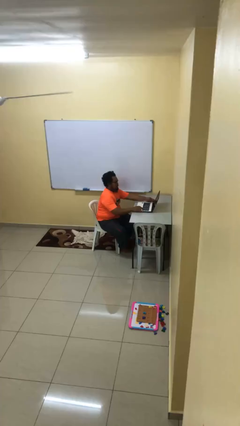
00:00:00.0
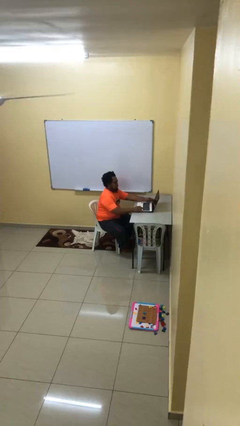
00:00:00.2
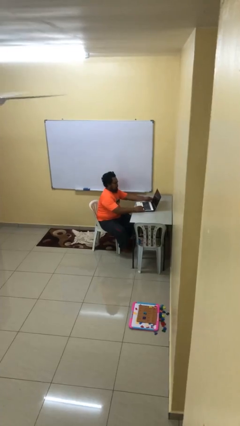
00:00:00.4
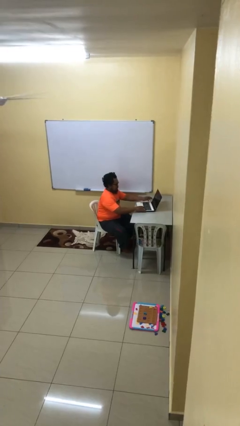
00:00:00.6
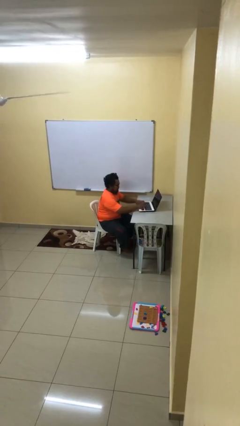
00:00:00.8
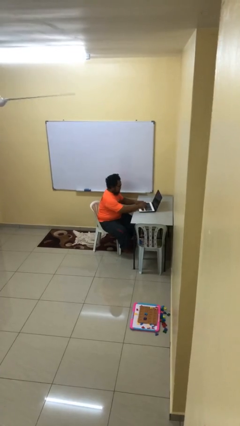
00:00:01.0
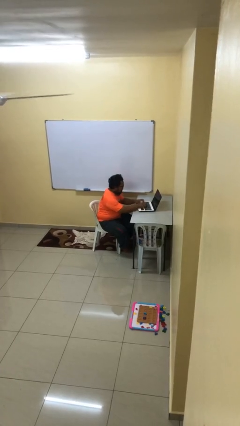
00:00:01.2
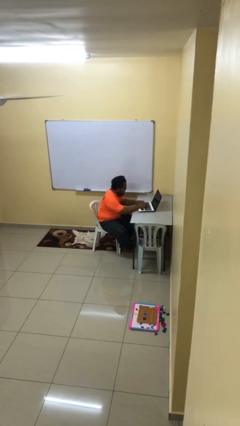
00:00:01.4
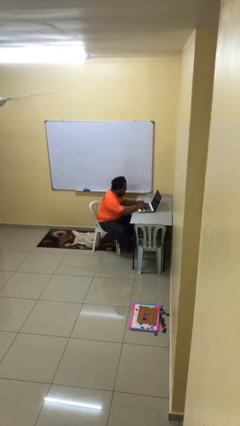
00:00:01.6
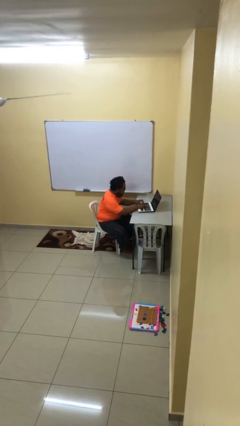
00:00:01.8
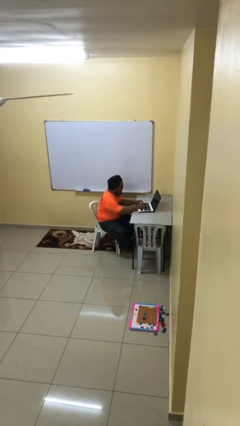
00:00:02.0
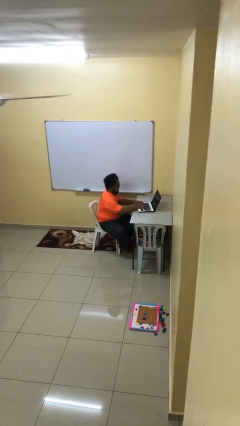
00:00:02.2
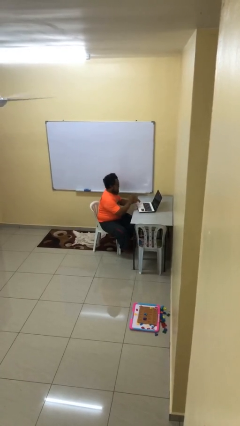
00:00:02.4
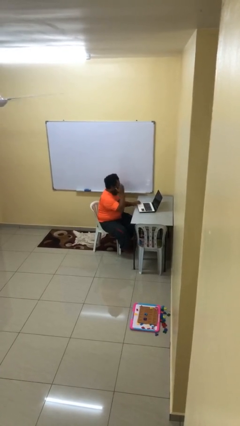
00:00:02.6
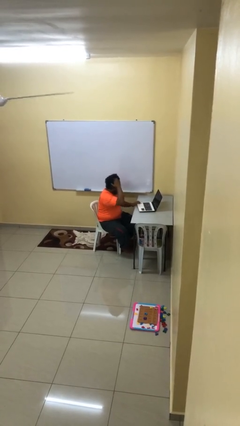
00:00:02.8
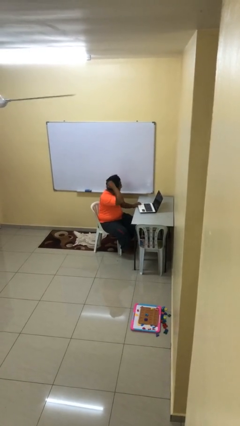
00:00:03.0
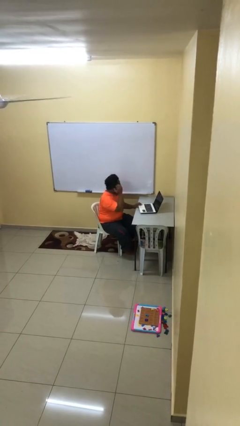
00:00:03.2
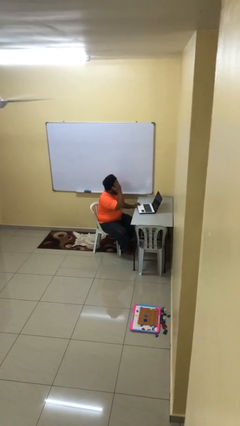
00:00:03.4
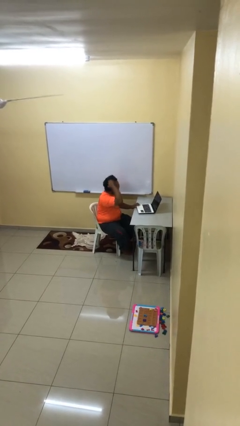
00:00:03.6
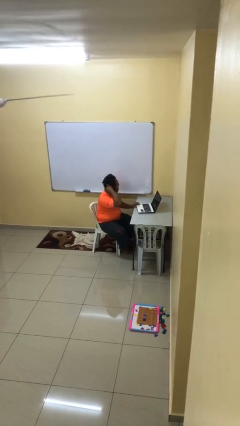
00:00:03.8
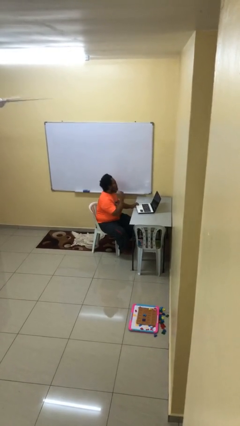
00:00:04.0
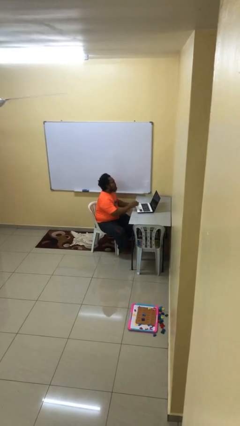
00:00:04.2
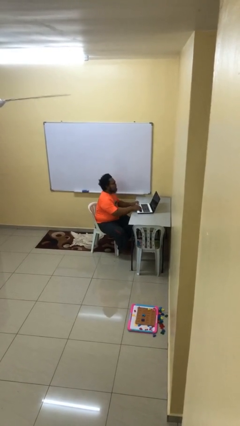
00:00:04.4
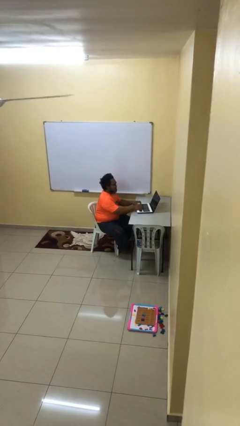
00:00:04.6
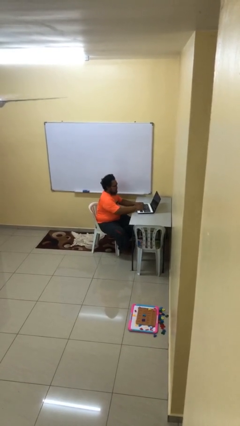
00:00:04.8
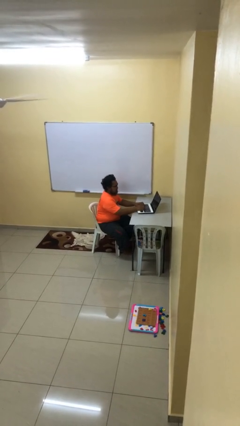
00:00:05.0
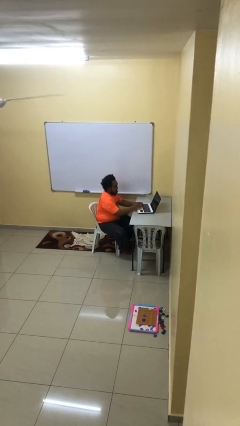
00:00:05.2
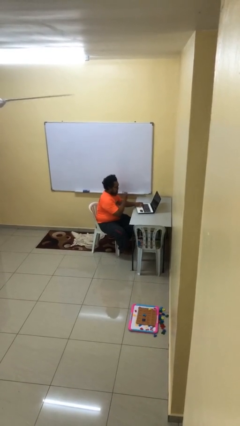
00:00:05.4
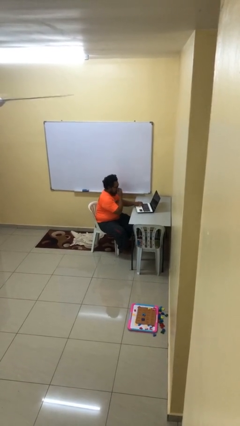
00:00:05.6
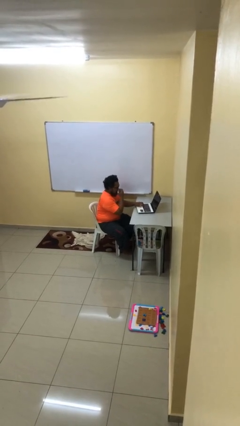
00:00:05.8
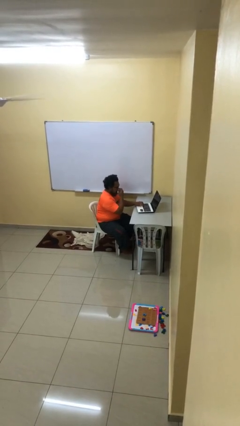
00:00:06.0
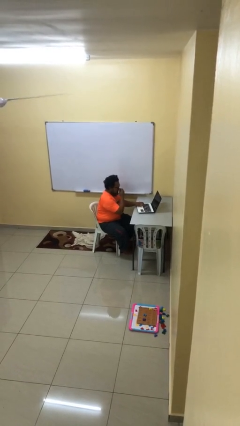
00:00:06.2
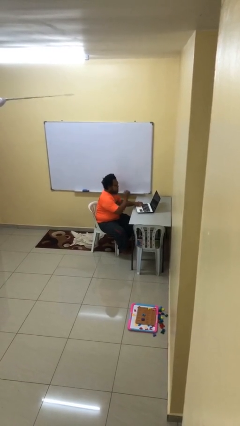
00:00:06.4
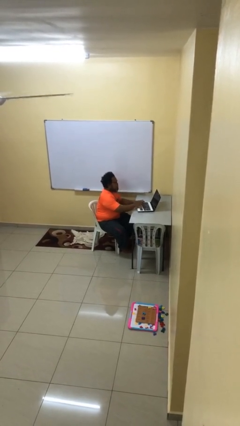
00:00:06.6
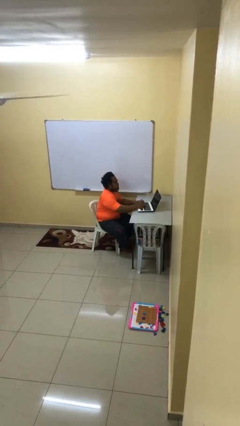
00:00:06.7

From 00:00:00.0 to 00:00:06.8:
person interacts with laptop

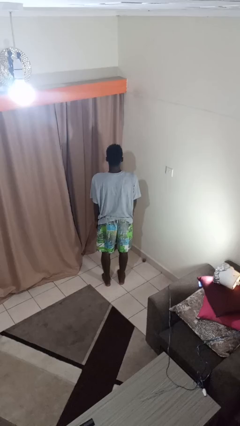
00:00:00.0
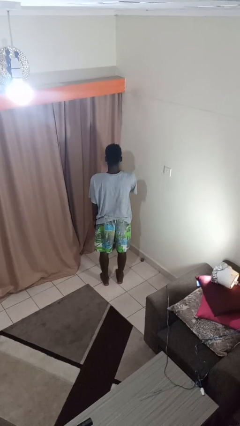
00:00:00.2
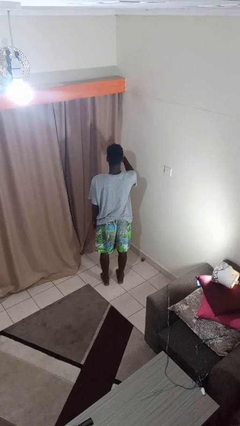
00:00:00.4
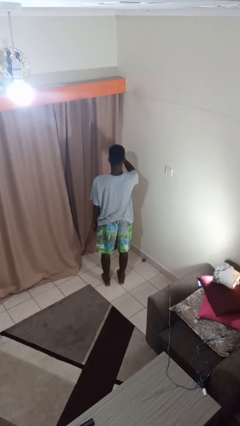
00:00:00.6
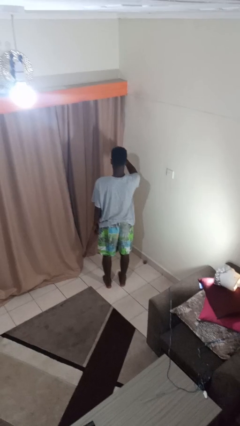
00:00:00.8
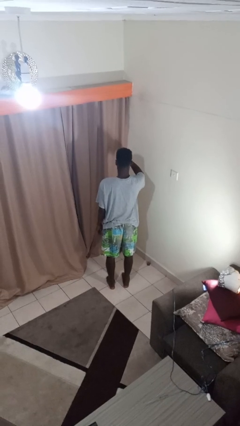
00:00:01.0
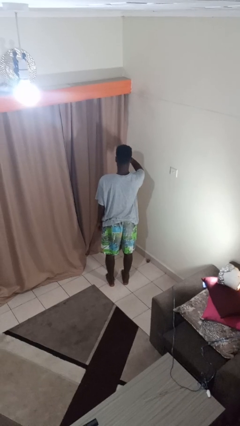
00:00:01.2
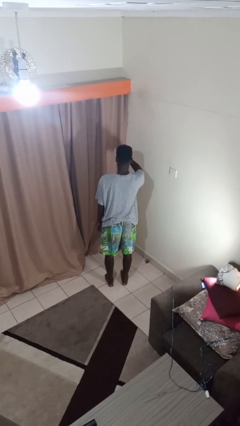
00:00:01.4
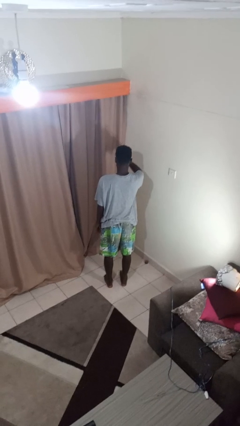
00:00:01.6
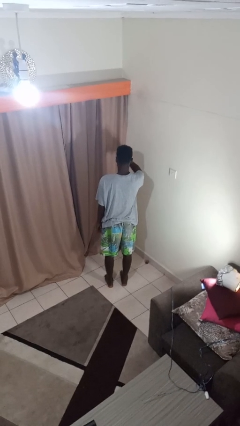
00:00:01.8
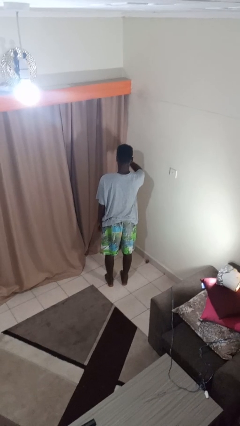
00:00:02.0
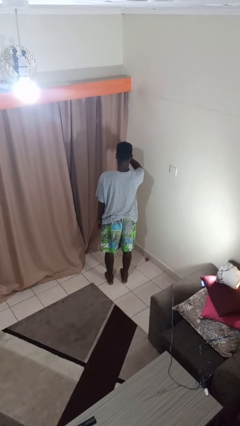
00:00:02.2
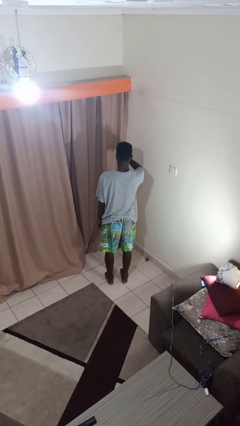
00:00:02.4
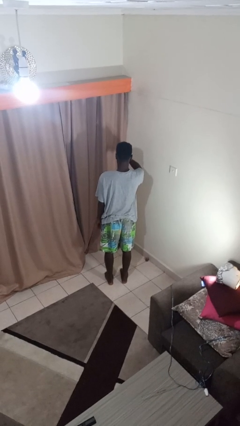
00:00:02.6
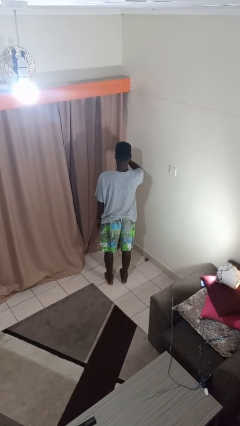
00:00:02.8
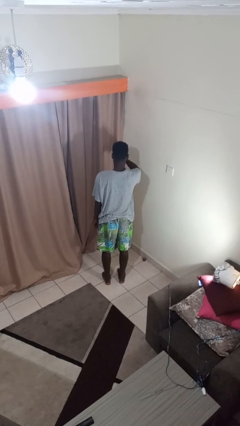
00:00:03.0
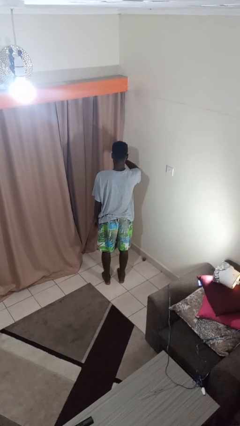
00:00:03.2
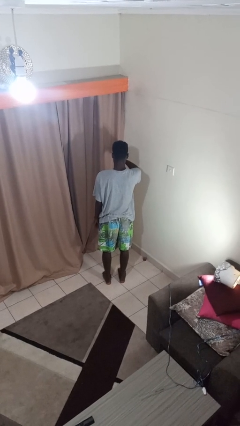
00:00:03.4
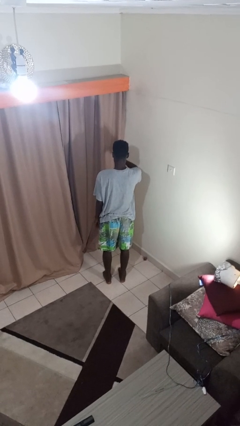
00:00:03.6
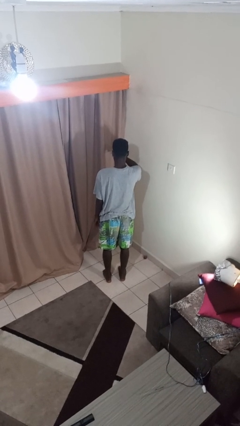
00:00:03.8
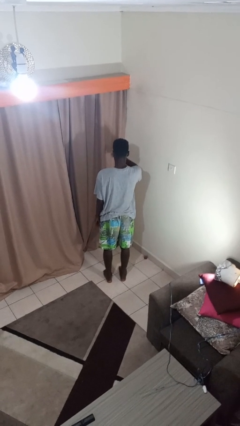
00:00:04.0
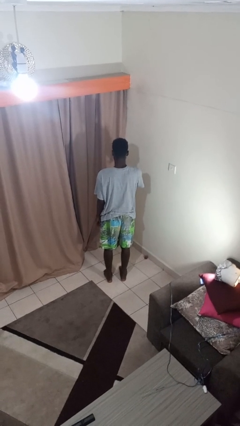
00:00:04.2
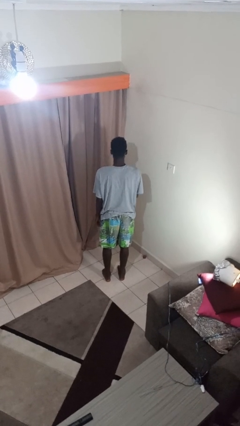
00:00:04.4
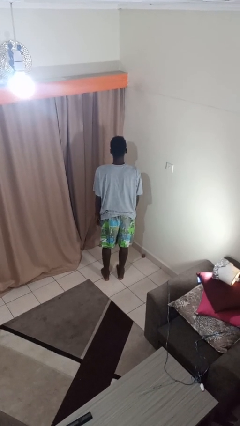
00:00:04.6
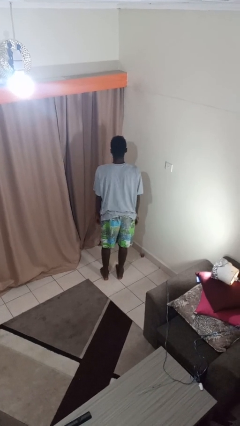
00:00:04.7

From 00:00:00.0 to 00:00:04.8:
person gestures hang loose

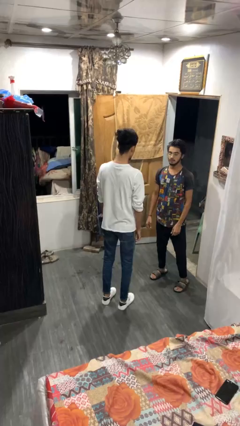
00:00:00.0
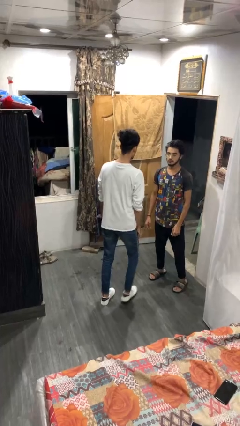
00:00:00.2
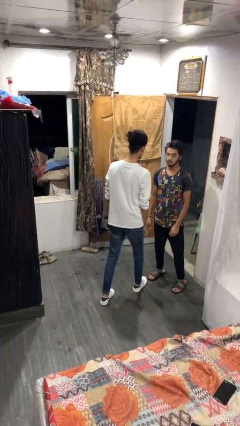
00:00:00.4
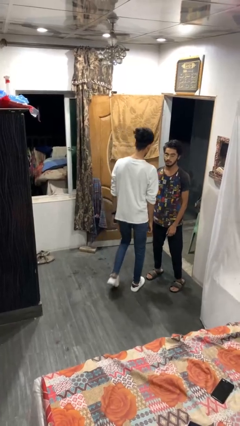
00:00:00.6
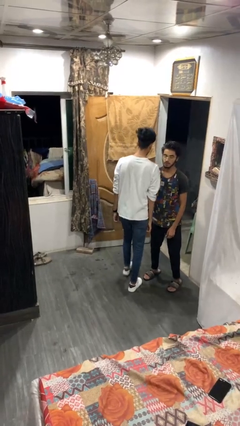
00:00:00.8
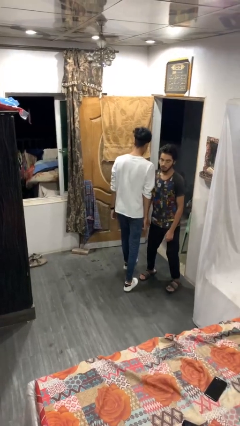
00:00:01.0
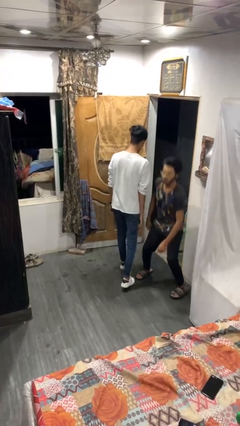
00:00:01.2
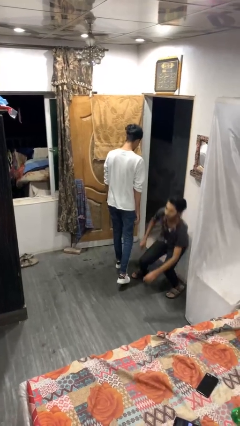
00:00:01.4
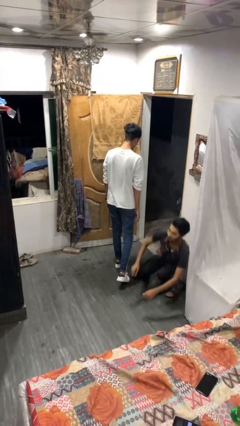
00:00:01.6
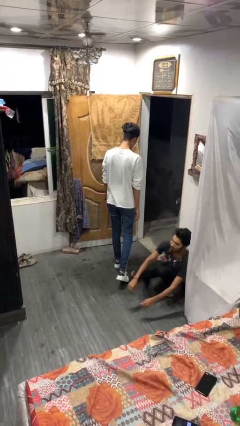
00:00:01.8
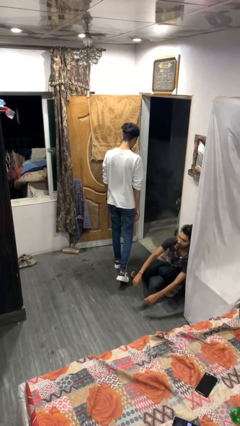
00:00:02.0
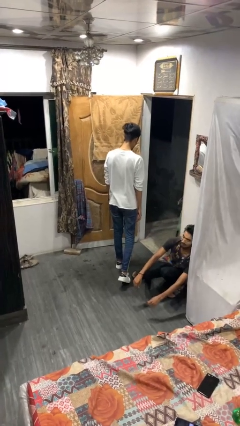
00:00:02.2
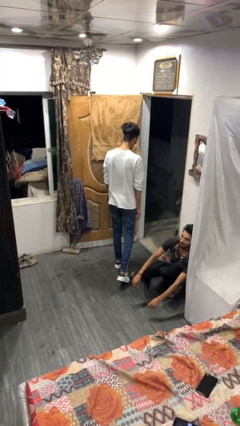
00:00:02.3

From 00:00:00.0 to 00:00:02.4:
person bumps into person

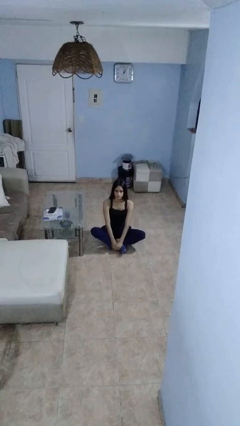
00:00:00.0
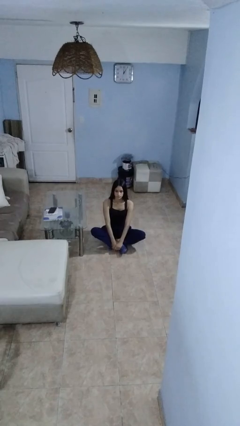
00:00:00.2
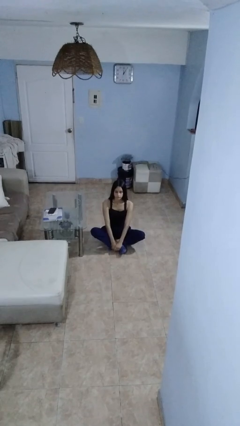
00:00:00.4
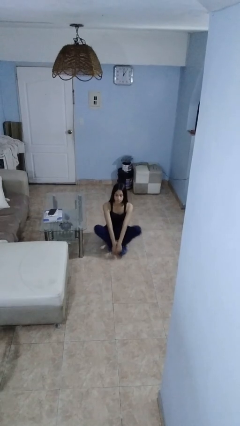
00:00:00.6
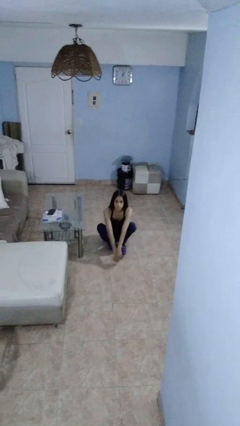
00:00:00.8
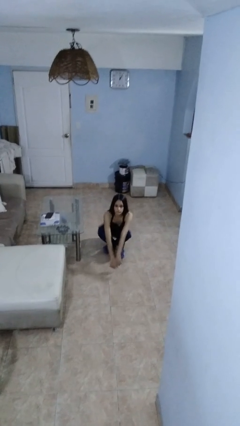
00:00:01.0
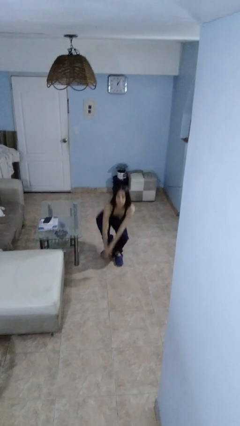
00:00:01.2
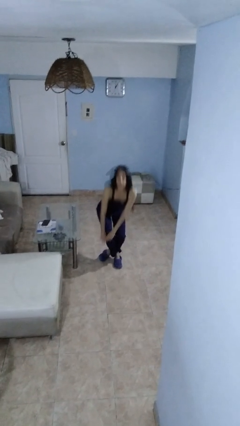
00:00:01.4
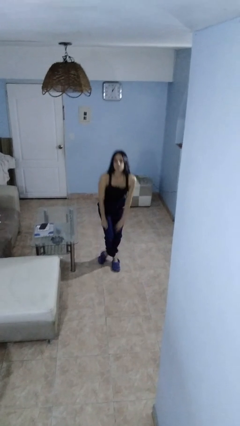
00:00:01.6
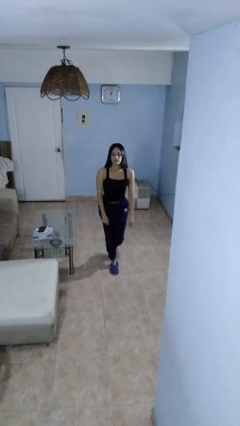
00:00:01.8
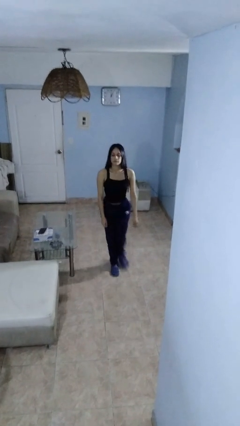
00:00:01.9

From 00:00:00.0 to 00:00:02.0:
person stands up from floor

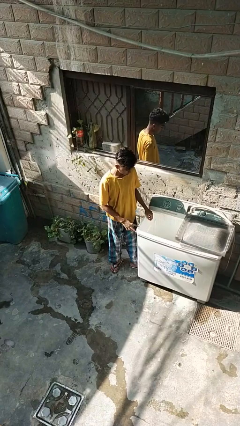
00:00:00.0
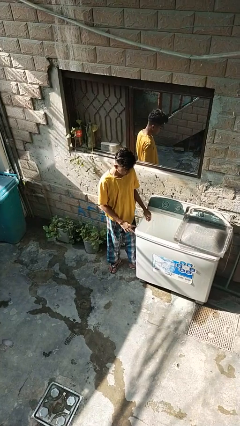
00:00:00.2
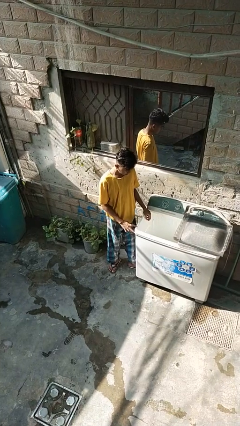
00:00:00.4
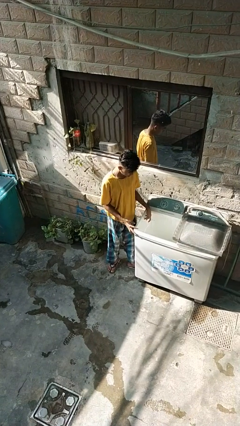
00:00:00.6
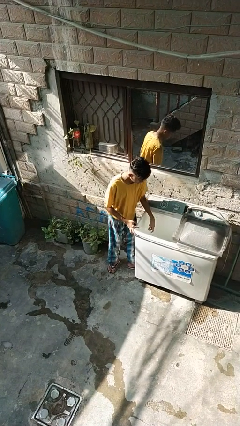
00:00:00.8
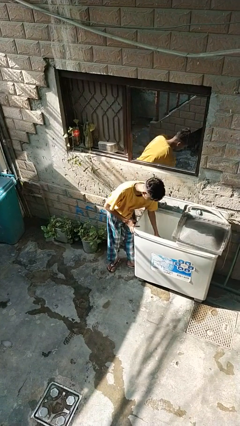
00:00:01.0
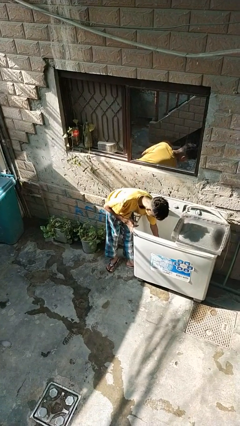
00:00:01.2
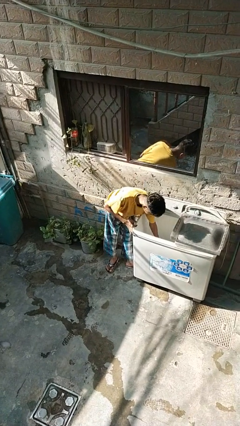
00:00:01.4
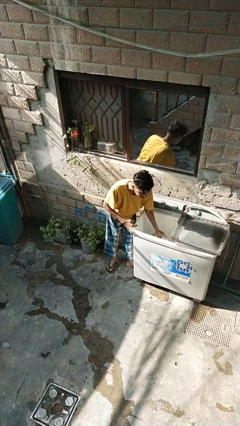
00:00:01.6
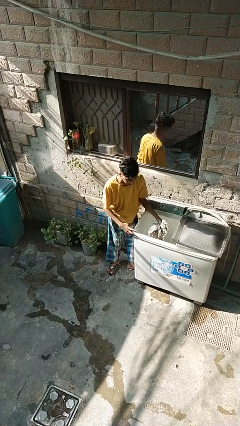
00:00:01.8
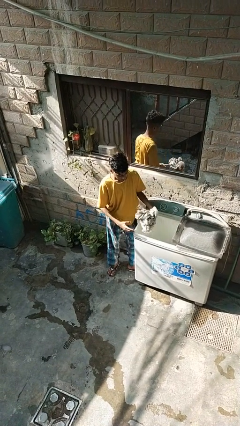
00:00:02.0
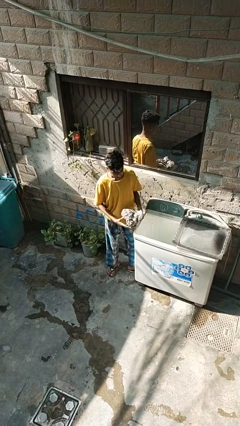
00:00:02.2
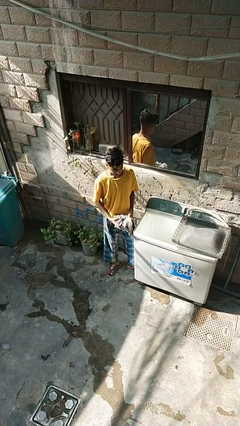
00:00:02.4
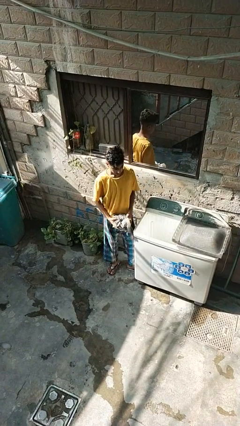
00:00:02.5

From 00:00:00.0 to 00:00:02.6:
person unloads clotheswasher
